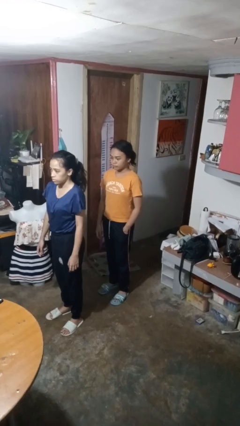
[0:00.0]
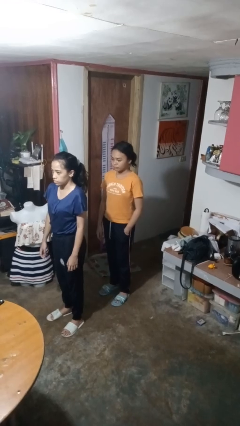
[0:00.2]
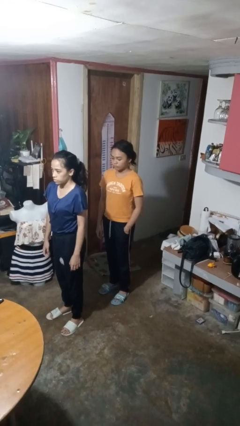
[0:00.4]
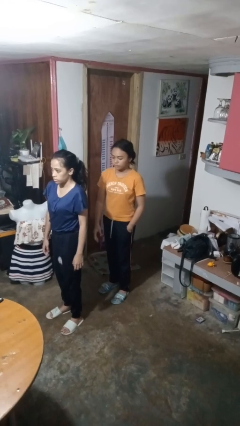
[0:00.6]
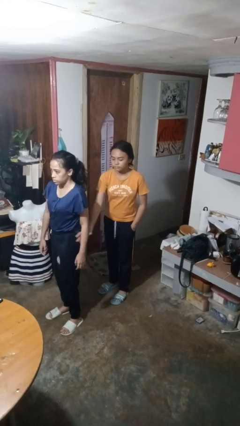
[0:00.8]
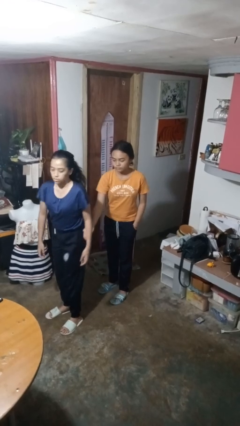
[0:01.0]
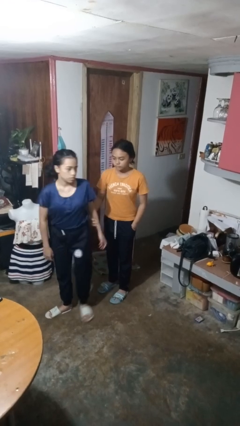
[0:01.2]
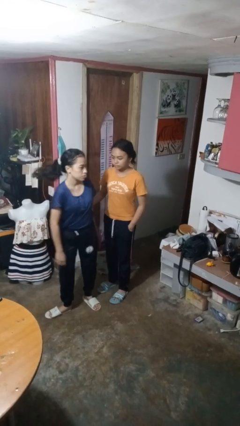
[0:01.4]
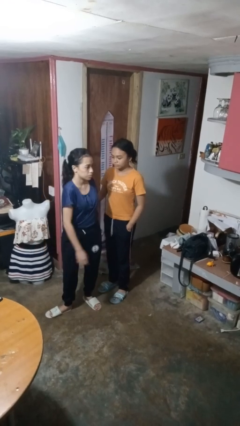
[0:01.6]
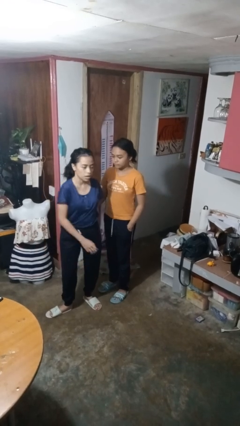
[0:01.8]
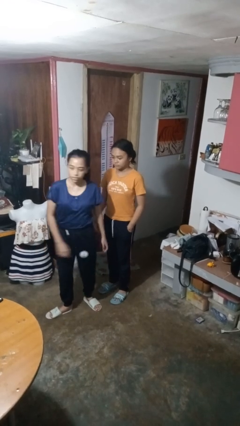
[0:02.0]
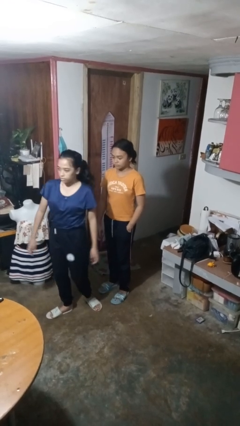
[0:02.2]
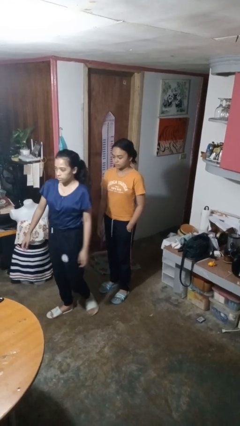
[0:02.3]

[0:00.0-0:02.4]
person grabs person by forearm

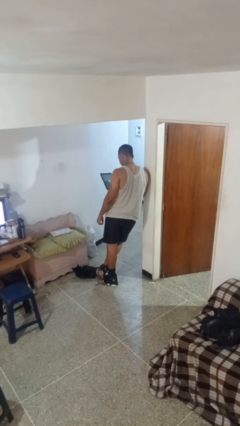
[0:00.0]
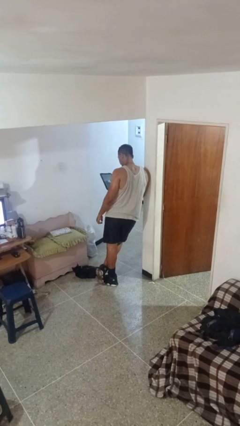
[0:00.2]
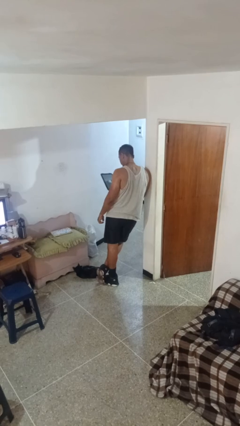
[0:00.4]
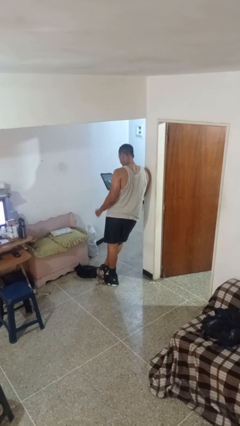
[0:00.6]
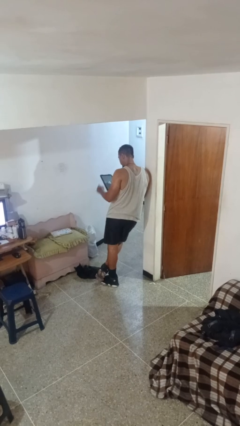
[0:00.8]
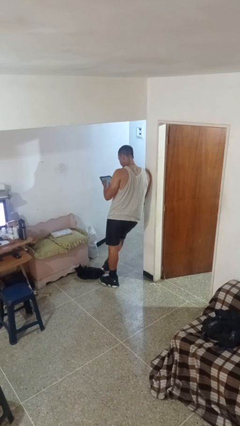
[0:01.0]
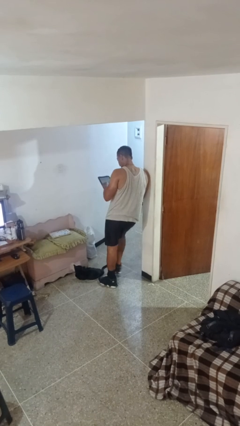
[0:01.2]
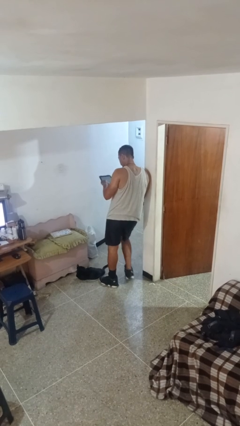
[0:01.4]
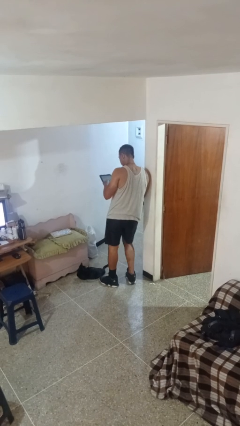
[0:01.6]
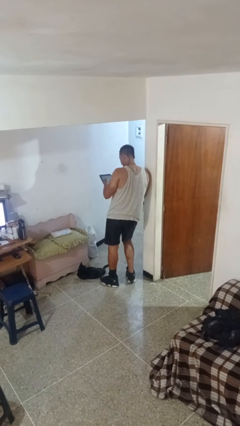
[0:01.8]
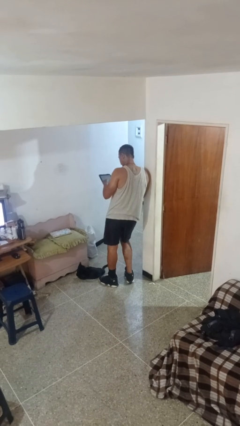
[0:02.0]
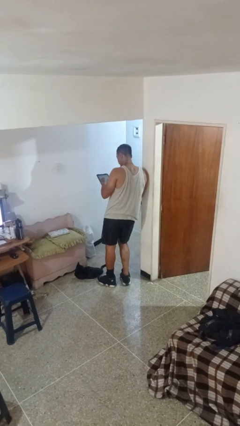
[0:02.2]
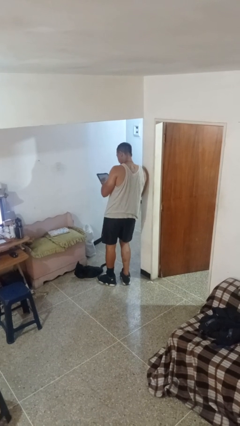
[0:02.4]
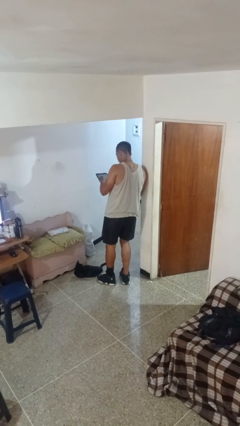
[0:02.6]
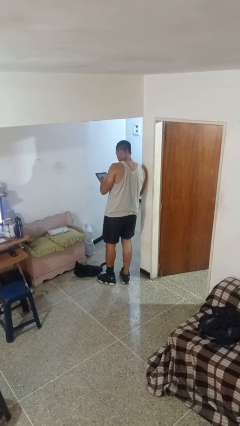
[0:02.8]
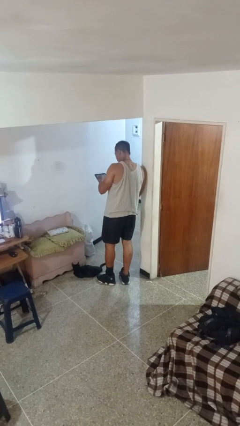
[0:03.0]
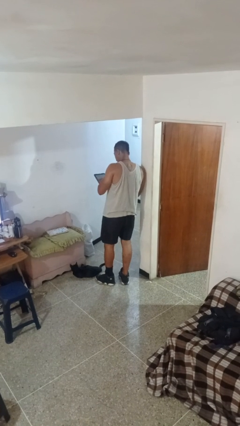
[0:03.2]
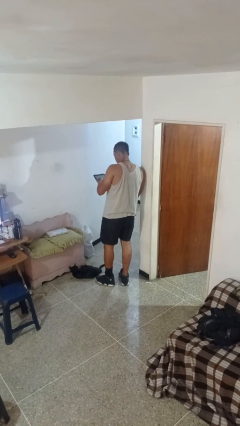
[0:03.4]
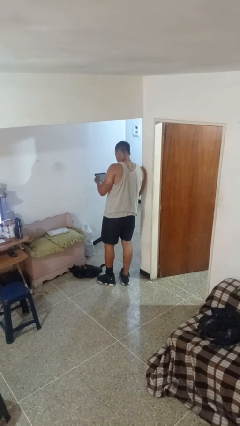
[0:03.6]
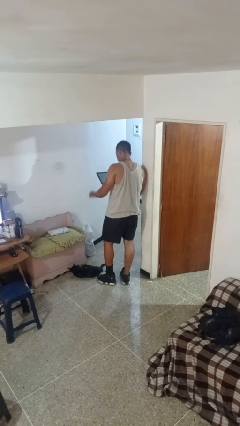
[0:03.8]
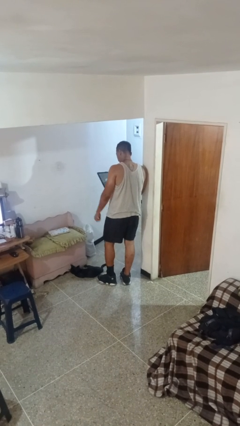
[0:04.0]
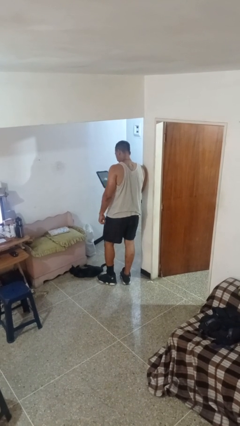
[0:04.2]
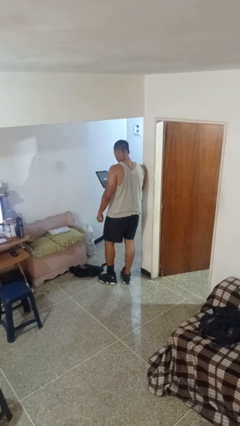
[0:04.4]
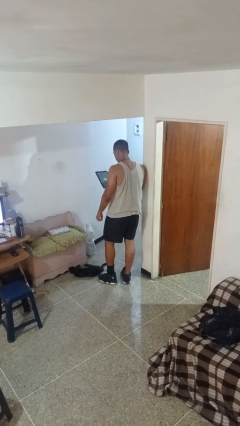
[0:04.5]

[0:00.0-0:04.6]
person interacts with tablet

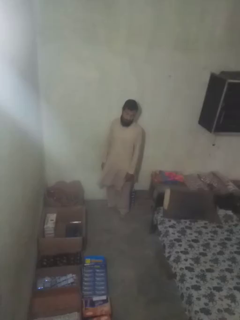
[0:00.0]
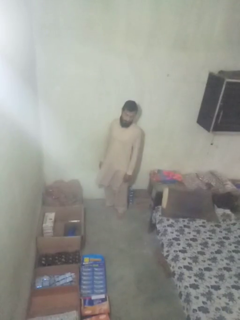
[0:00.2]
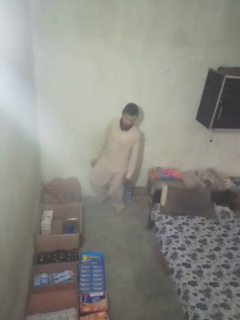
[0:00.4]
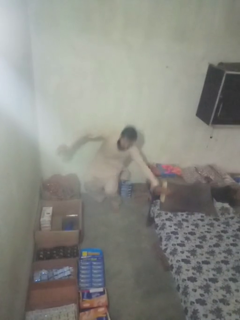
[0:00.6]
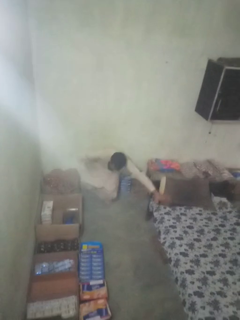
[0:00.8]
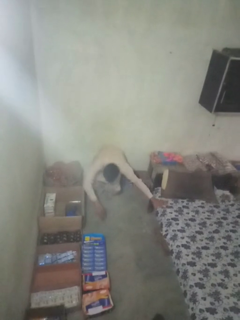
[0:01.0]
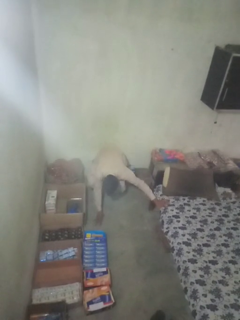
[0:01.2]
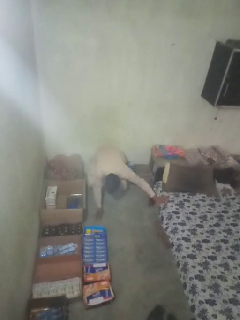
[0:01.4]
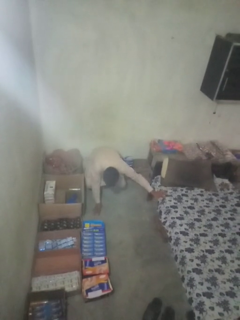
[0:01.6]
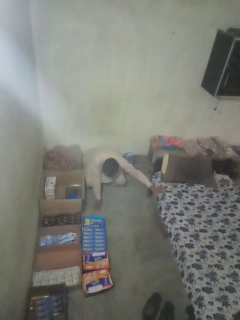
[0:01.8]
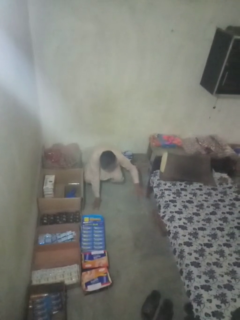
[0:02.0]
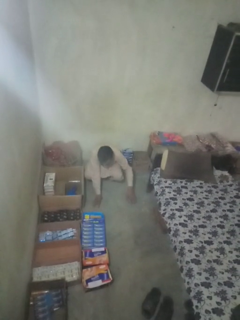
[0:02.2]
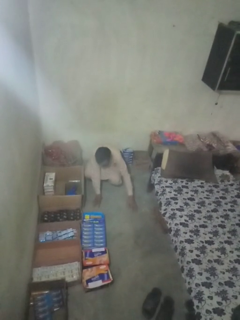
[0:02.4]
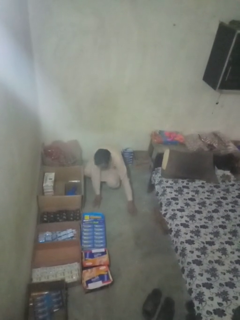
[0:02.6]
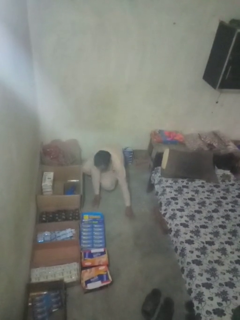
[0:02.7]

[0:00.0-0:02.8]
person trips on object on floor

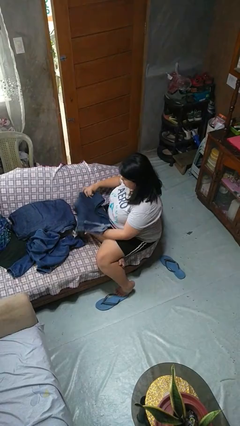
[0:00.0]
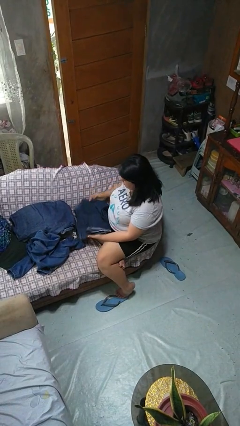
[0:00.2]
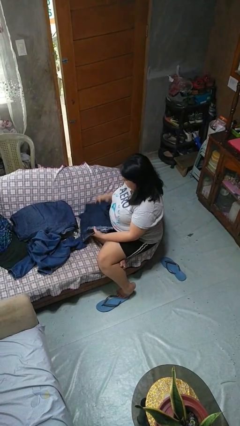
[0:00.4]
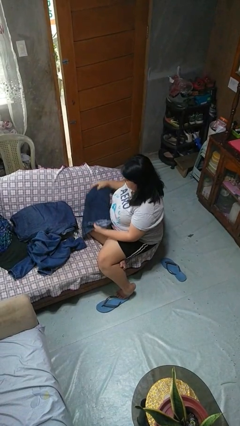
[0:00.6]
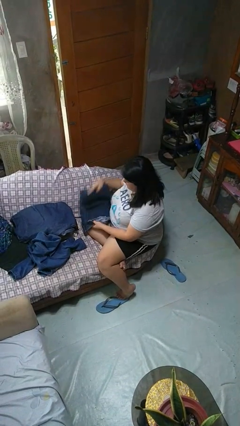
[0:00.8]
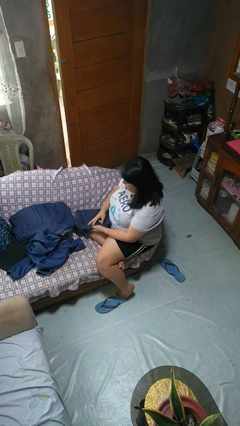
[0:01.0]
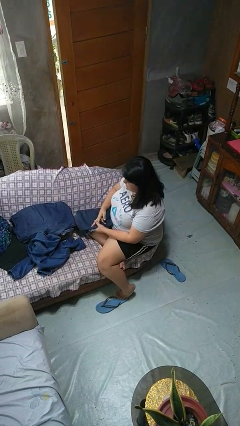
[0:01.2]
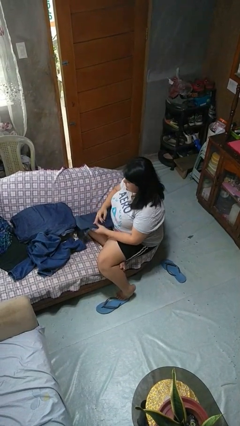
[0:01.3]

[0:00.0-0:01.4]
person folds pants

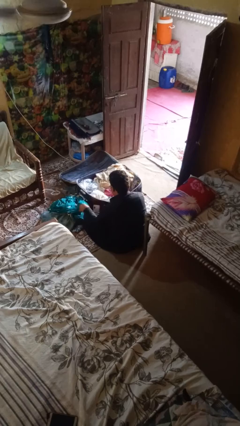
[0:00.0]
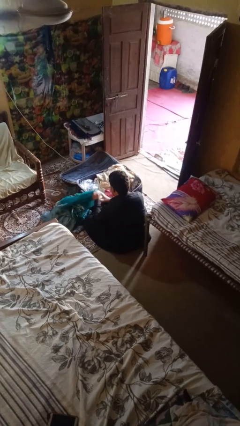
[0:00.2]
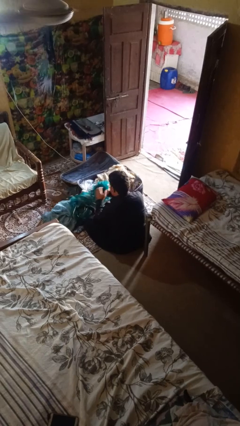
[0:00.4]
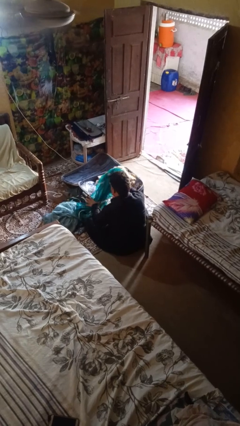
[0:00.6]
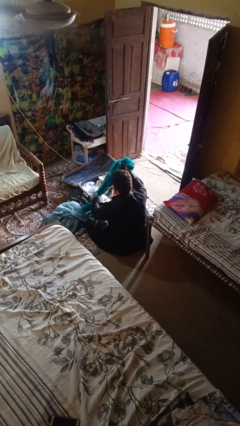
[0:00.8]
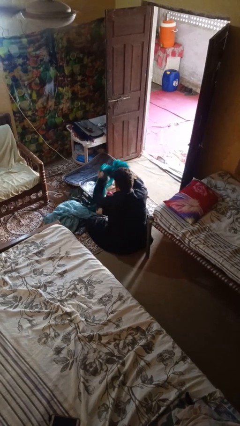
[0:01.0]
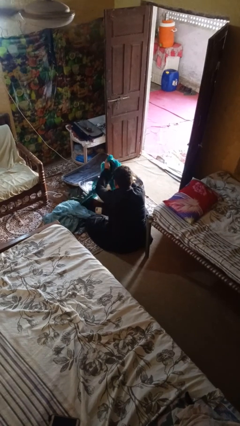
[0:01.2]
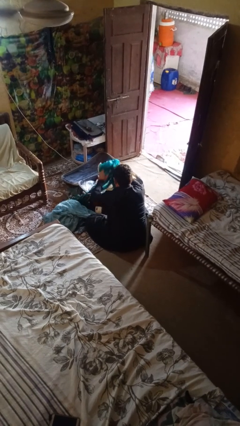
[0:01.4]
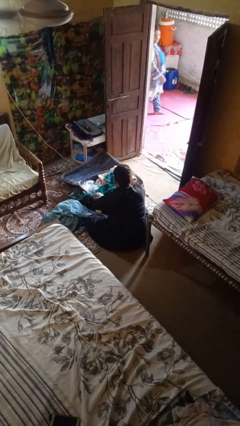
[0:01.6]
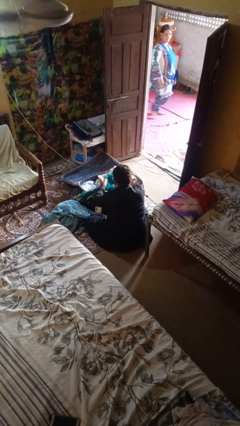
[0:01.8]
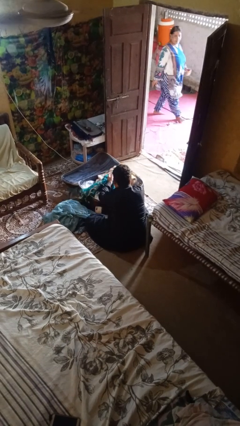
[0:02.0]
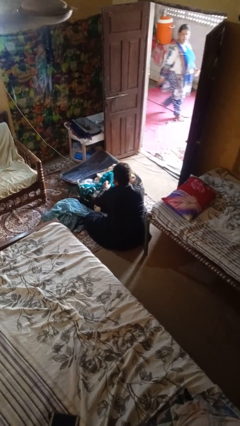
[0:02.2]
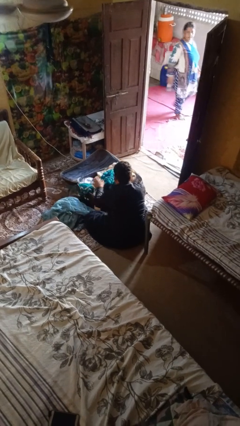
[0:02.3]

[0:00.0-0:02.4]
person loads clothes into suitcase

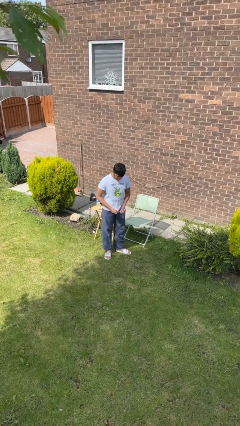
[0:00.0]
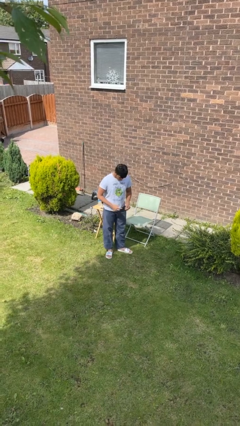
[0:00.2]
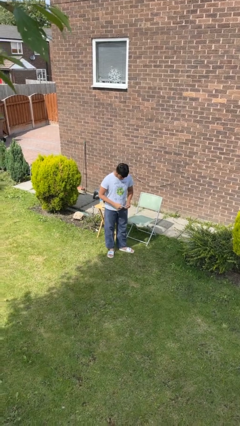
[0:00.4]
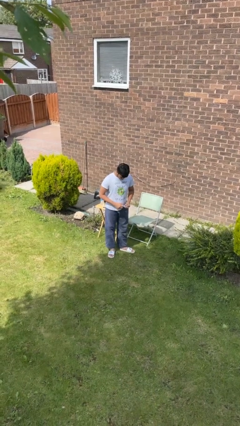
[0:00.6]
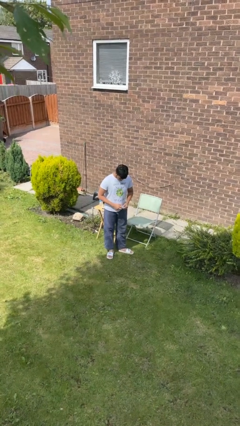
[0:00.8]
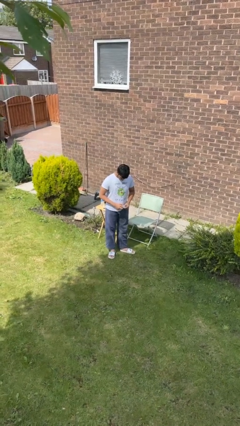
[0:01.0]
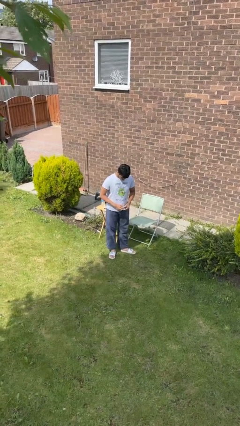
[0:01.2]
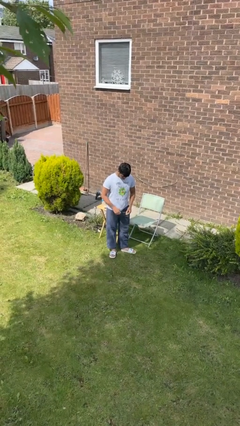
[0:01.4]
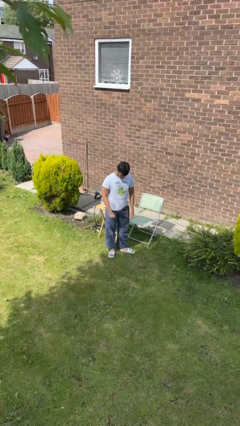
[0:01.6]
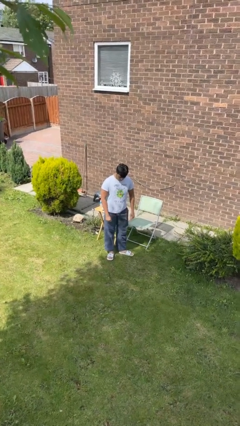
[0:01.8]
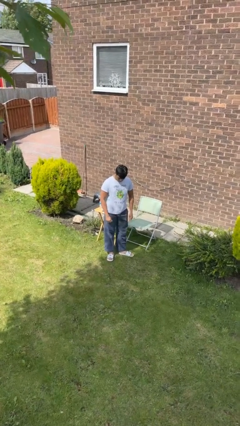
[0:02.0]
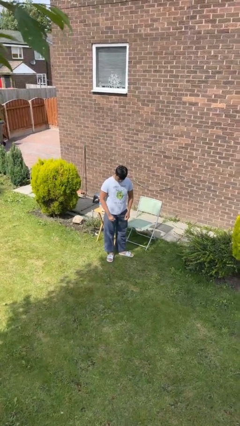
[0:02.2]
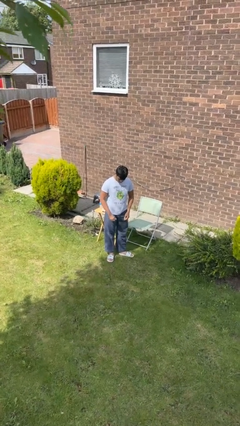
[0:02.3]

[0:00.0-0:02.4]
person puts on ring

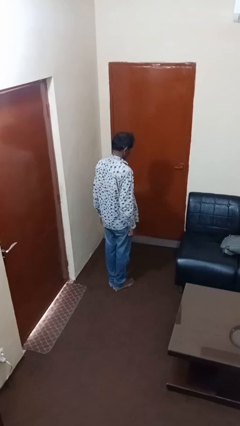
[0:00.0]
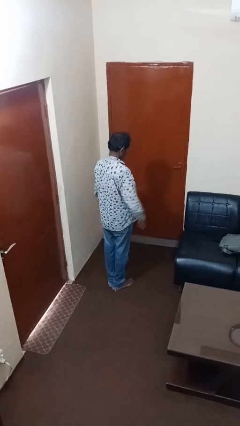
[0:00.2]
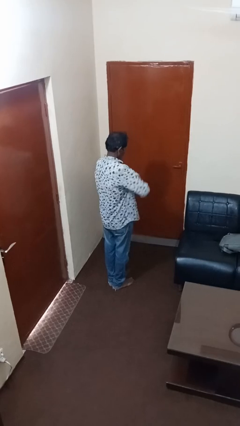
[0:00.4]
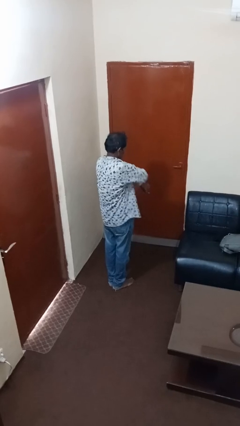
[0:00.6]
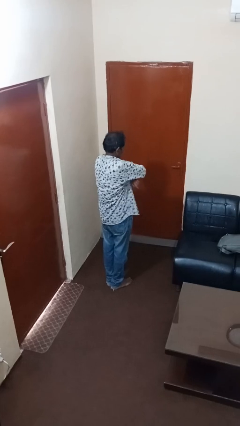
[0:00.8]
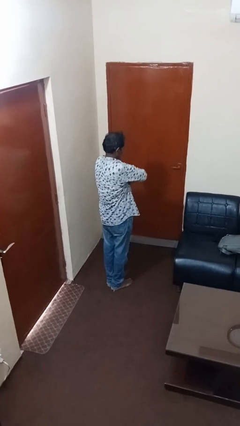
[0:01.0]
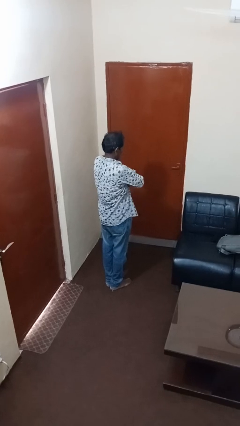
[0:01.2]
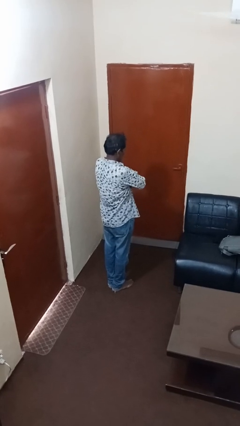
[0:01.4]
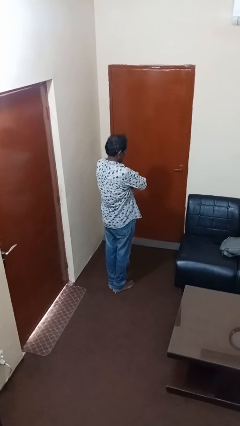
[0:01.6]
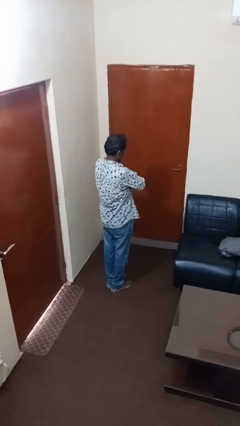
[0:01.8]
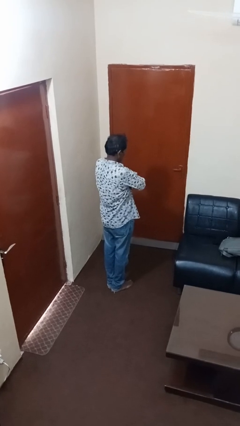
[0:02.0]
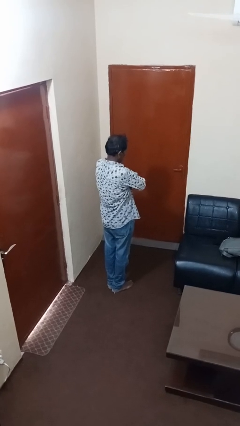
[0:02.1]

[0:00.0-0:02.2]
person crosses arms
